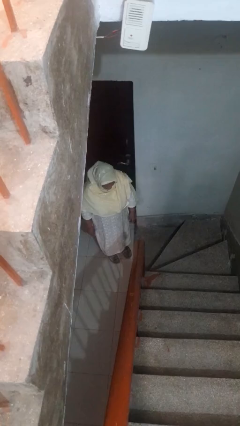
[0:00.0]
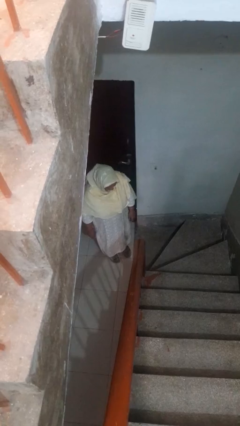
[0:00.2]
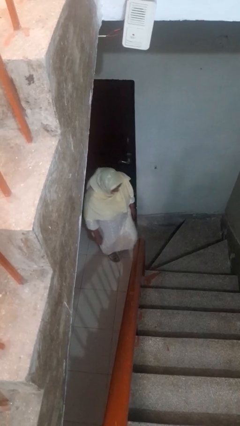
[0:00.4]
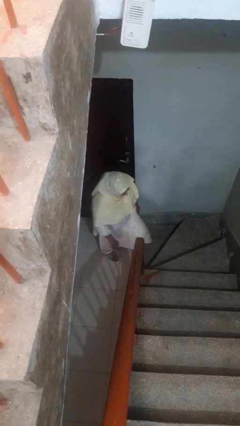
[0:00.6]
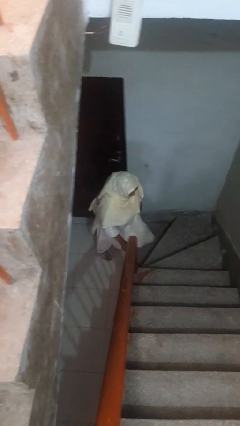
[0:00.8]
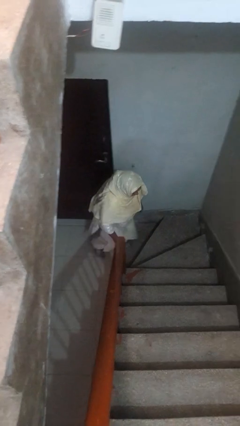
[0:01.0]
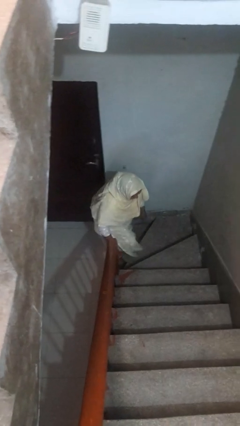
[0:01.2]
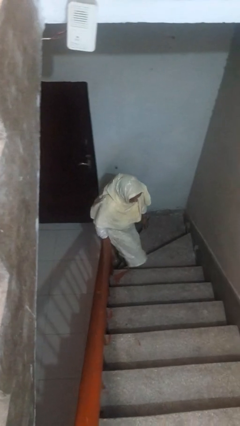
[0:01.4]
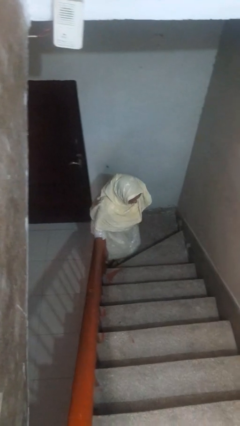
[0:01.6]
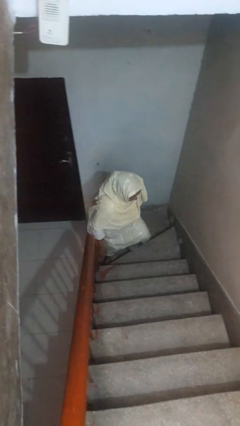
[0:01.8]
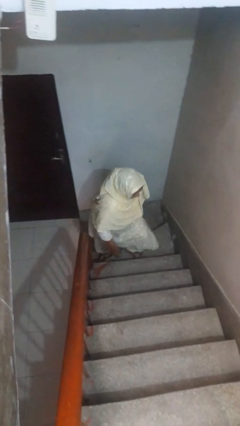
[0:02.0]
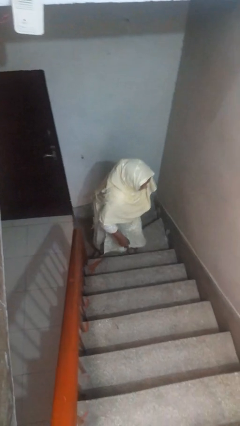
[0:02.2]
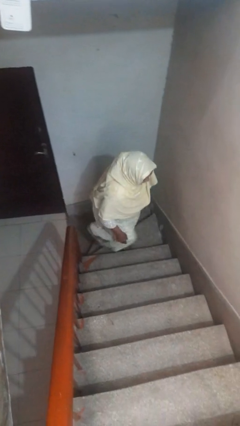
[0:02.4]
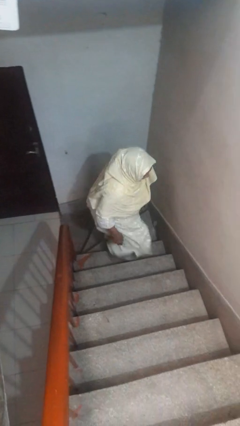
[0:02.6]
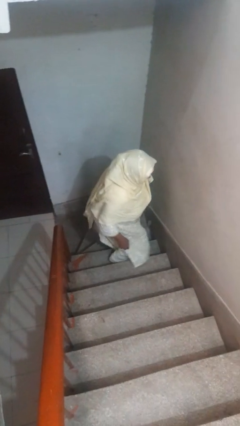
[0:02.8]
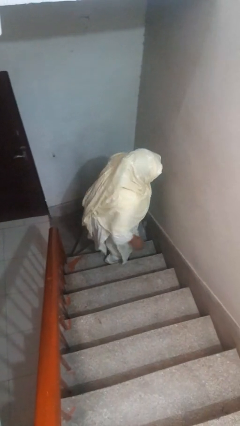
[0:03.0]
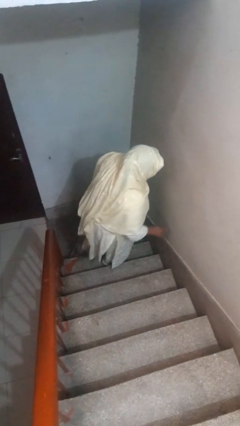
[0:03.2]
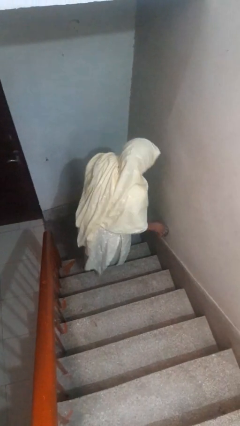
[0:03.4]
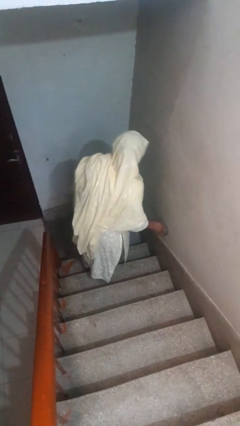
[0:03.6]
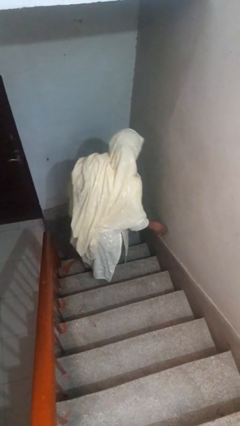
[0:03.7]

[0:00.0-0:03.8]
person climbs up stairs

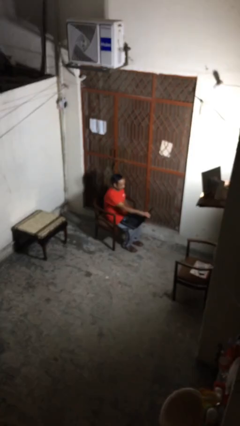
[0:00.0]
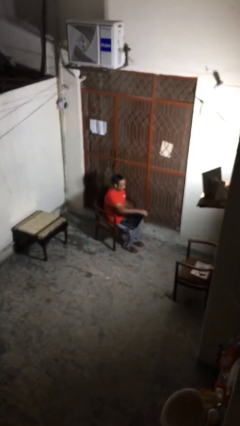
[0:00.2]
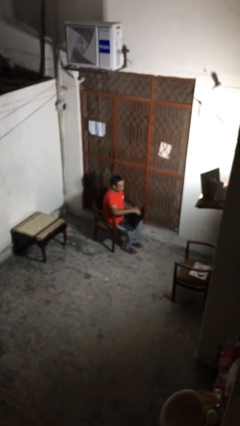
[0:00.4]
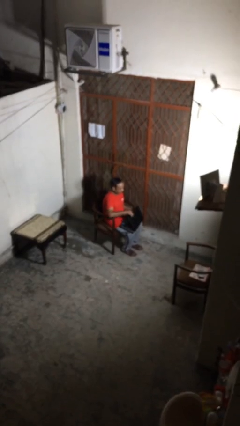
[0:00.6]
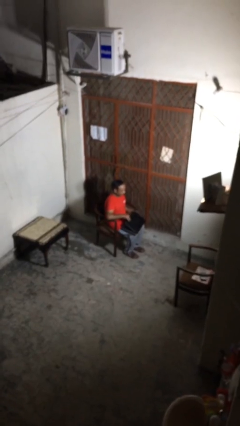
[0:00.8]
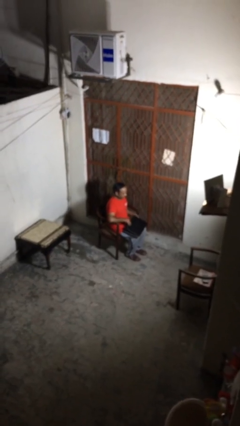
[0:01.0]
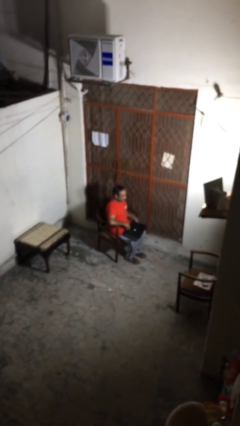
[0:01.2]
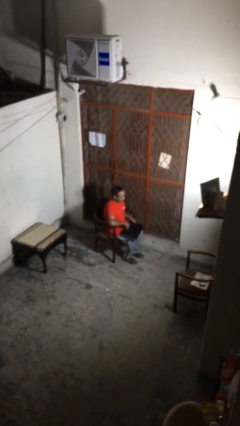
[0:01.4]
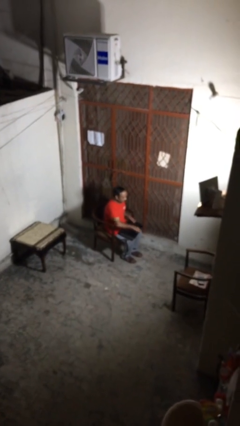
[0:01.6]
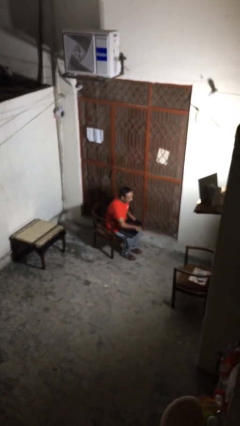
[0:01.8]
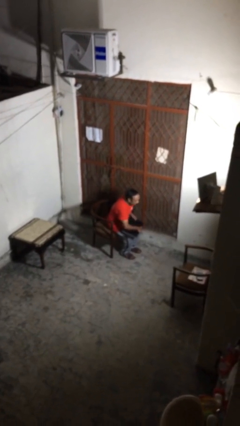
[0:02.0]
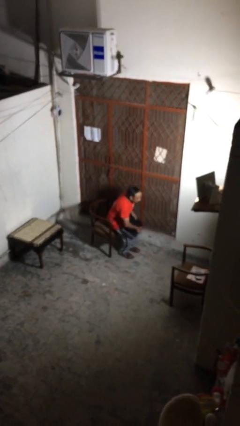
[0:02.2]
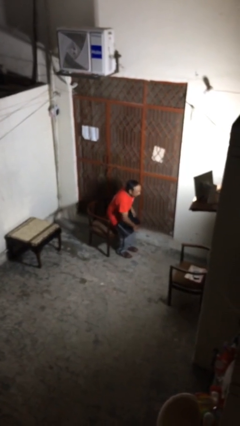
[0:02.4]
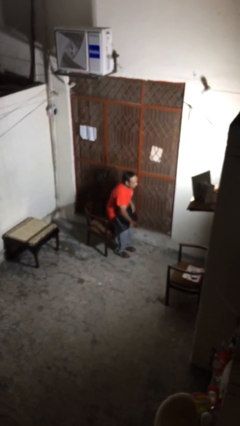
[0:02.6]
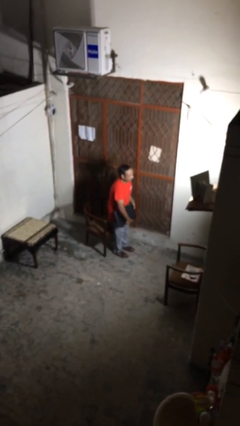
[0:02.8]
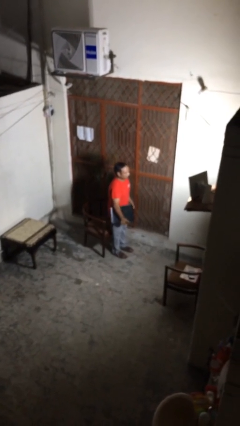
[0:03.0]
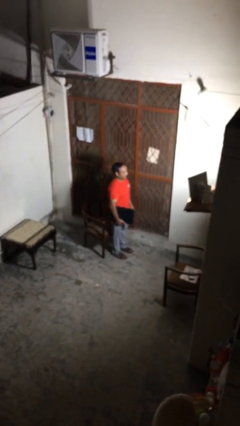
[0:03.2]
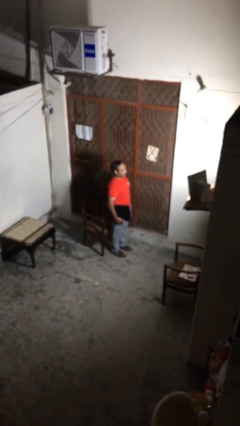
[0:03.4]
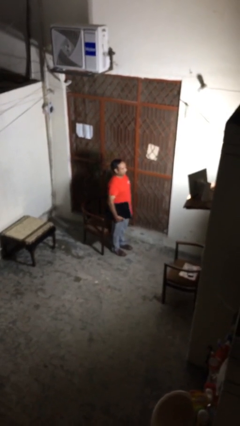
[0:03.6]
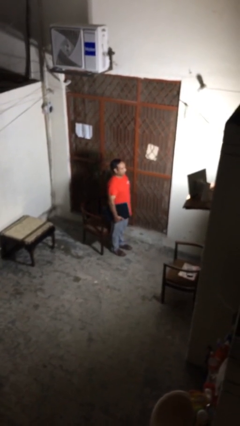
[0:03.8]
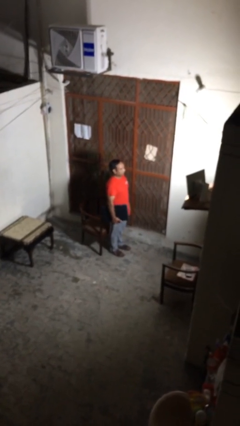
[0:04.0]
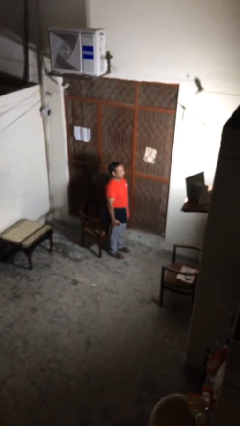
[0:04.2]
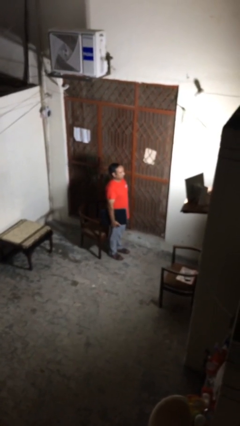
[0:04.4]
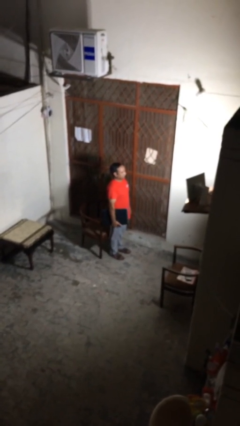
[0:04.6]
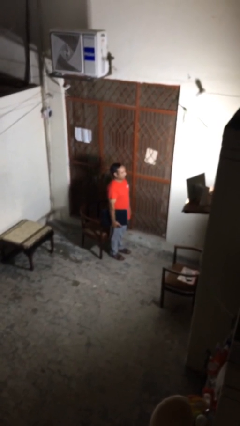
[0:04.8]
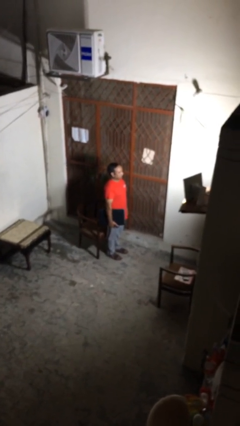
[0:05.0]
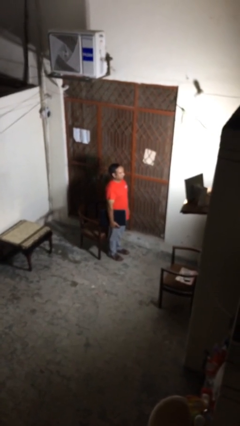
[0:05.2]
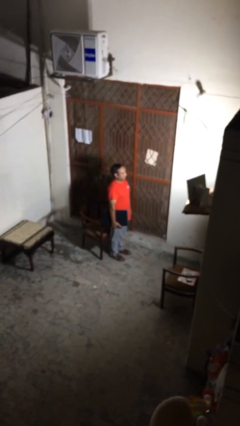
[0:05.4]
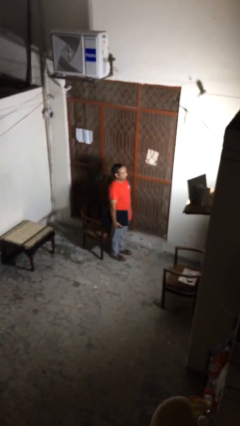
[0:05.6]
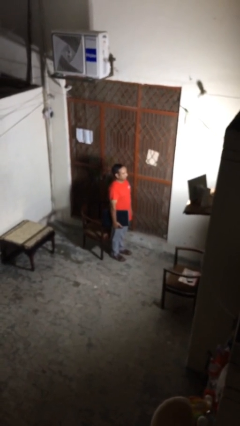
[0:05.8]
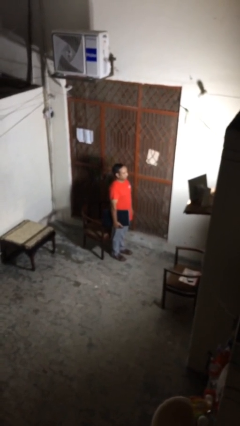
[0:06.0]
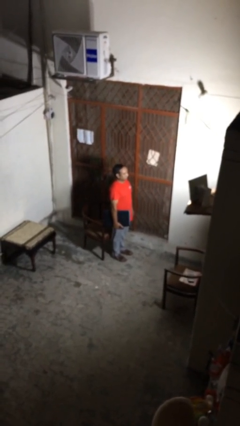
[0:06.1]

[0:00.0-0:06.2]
person stands up

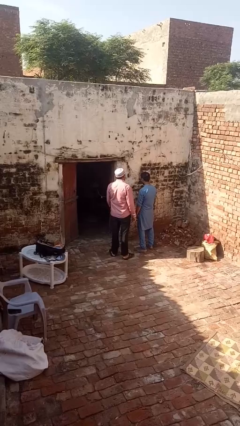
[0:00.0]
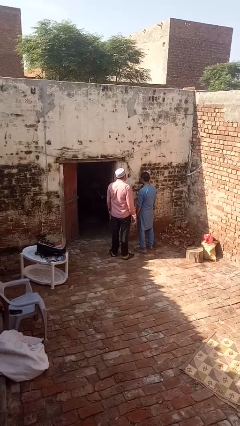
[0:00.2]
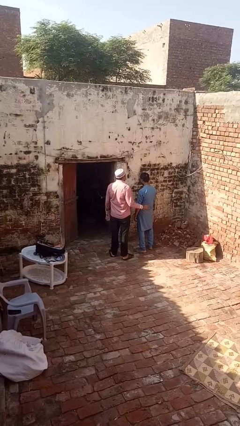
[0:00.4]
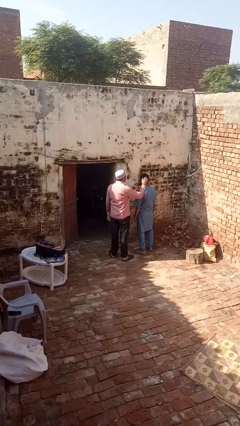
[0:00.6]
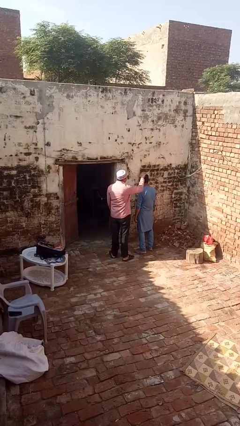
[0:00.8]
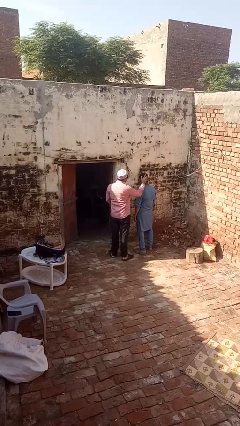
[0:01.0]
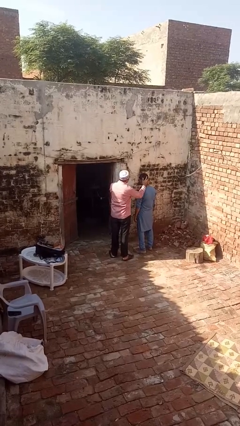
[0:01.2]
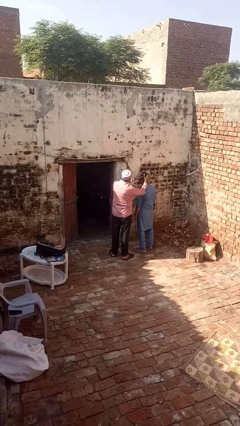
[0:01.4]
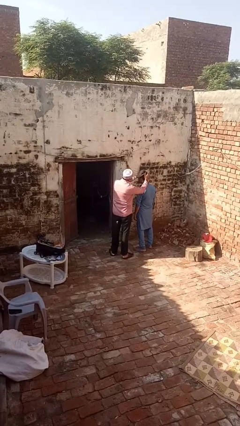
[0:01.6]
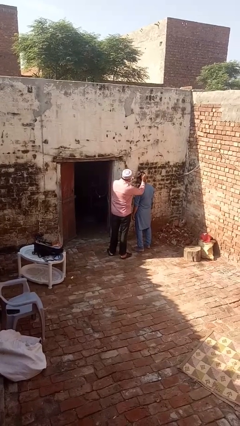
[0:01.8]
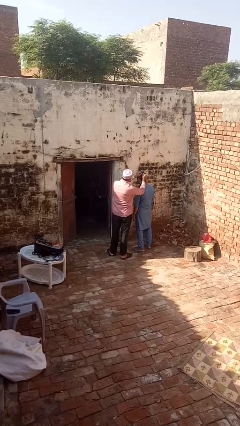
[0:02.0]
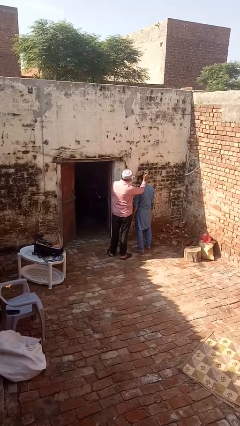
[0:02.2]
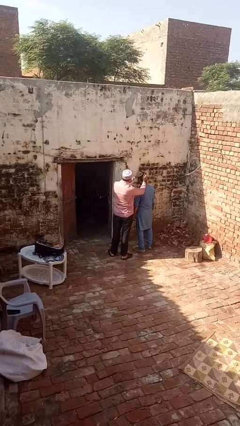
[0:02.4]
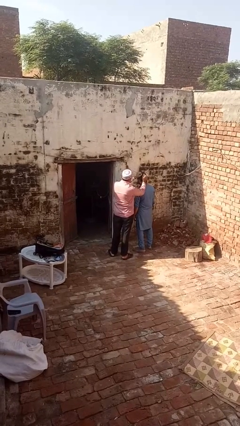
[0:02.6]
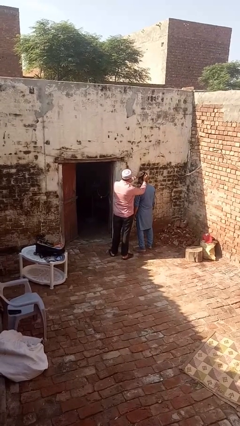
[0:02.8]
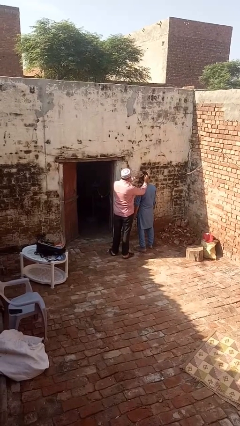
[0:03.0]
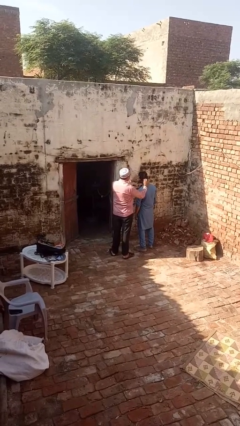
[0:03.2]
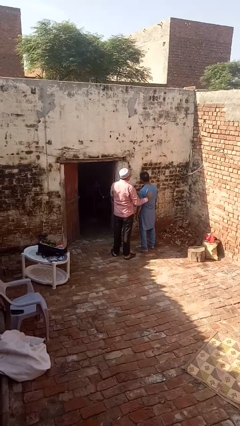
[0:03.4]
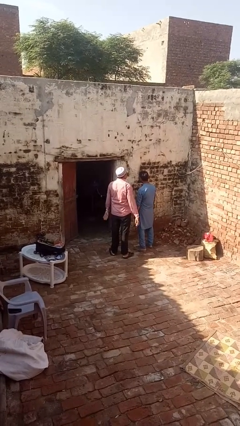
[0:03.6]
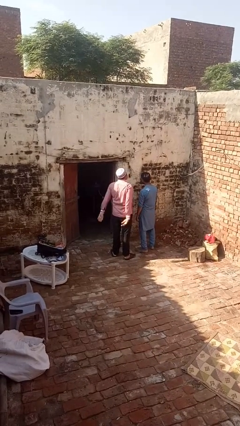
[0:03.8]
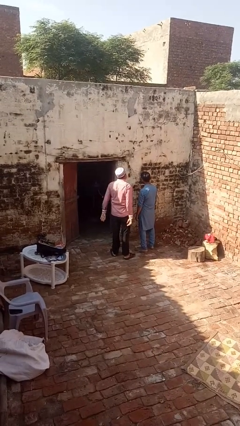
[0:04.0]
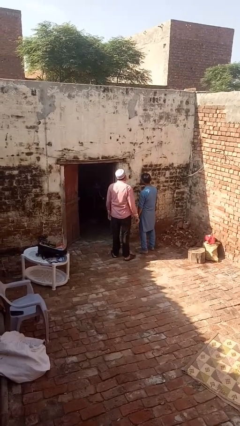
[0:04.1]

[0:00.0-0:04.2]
person grabs person by hair

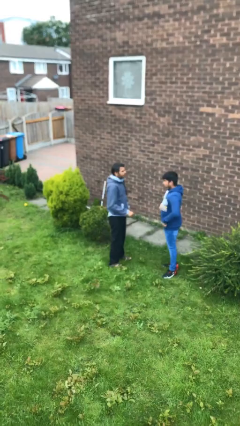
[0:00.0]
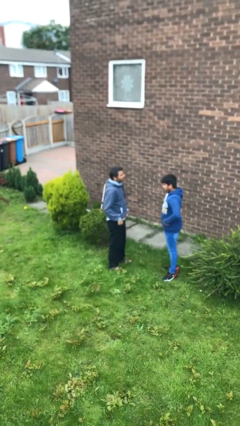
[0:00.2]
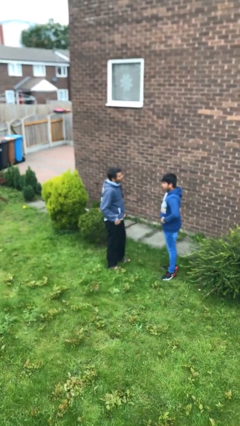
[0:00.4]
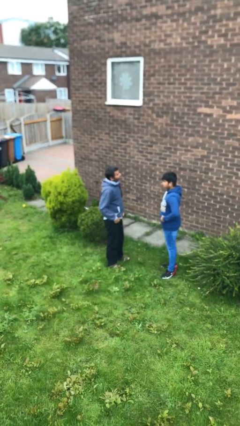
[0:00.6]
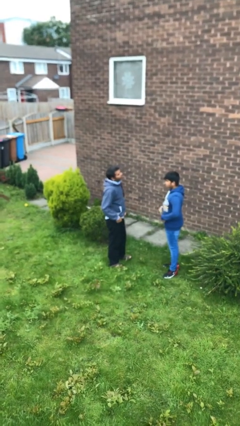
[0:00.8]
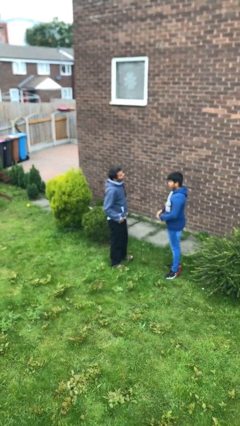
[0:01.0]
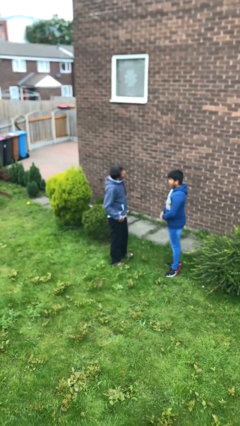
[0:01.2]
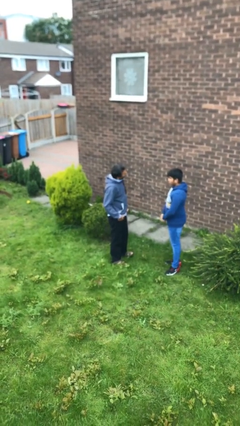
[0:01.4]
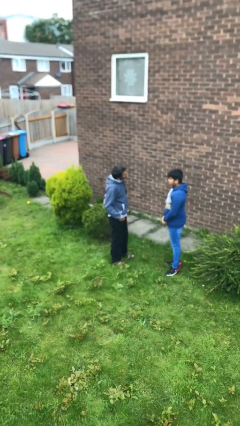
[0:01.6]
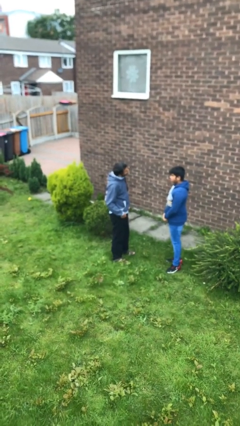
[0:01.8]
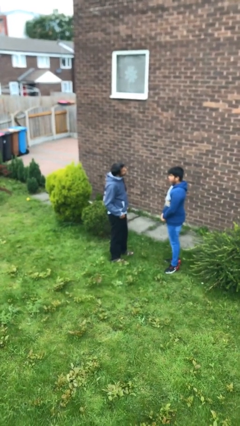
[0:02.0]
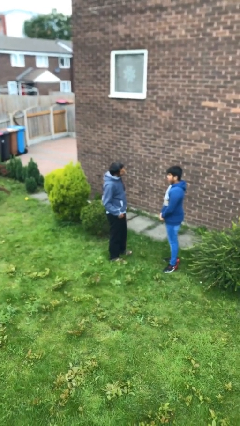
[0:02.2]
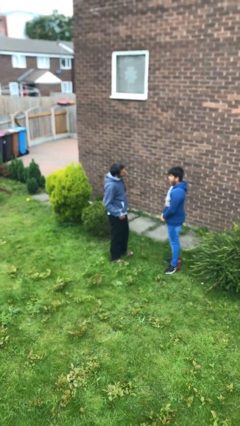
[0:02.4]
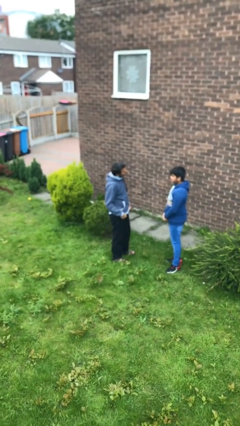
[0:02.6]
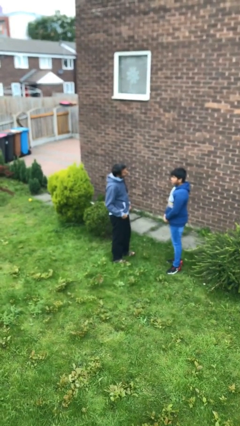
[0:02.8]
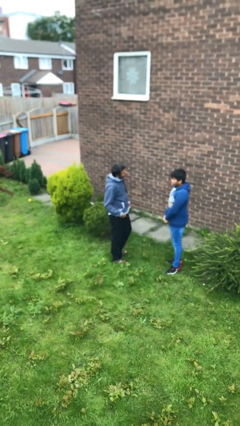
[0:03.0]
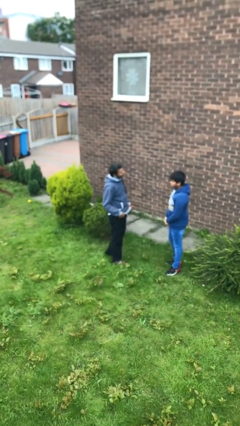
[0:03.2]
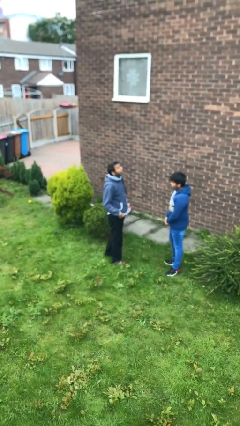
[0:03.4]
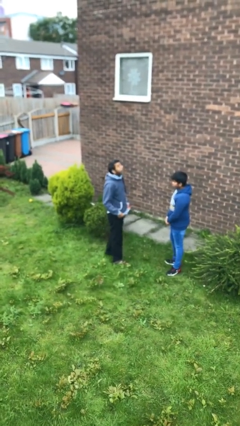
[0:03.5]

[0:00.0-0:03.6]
person talks to person

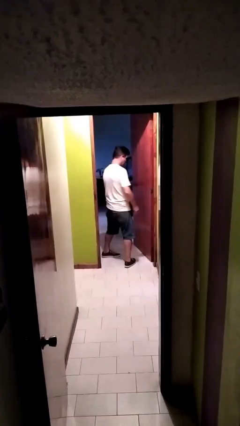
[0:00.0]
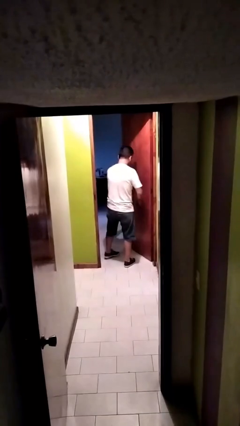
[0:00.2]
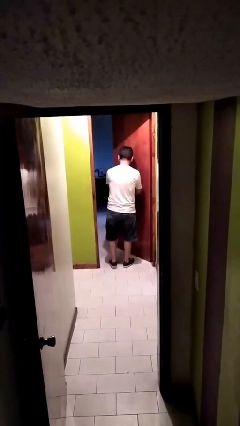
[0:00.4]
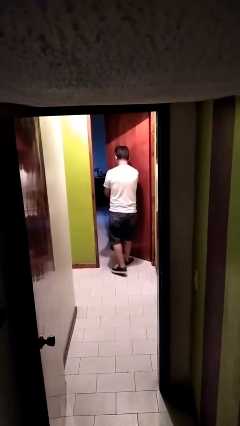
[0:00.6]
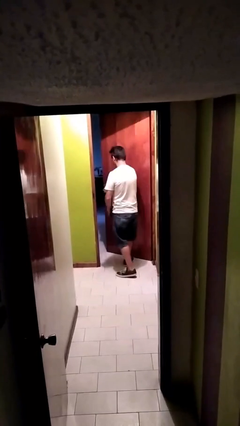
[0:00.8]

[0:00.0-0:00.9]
person closes facility door
